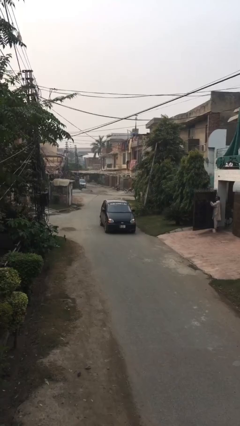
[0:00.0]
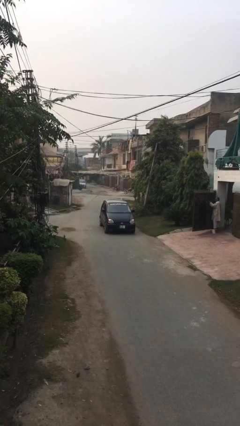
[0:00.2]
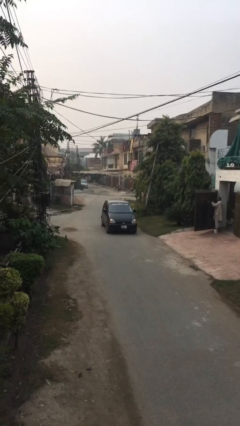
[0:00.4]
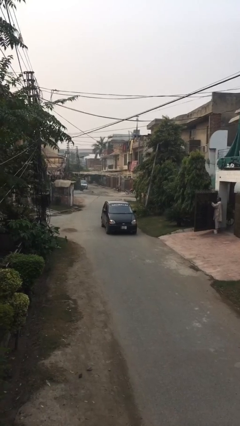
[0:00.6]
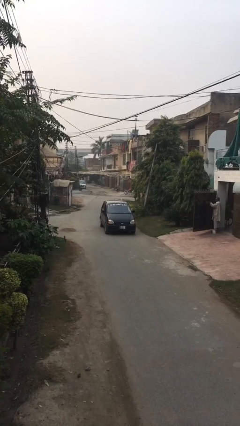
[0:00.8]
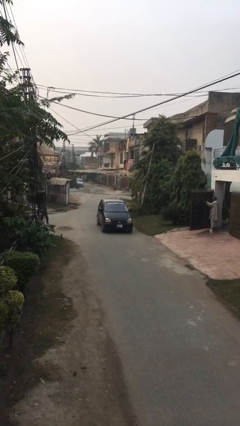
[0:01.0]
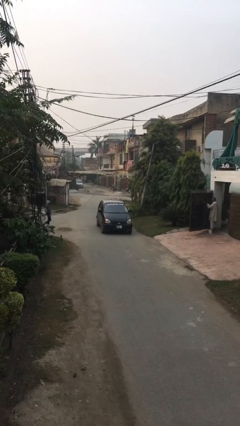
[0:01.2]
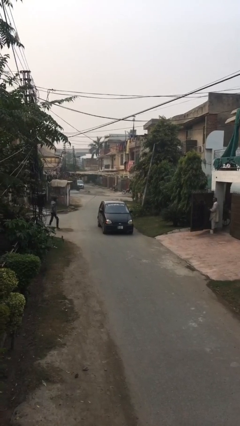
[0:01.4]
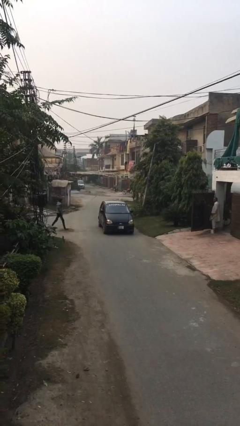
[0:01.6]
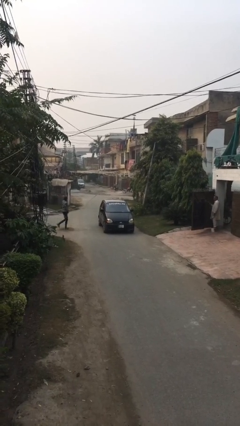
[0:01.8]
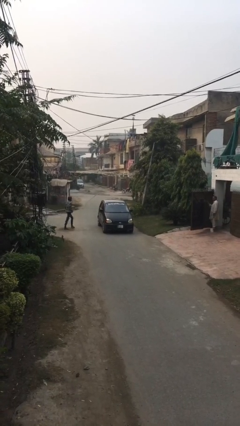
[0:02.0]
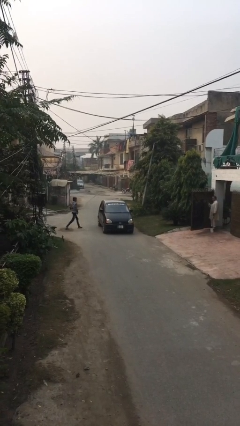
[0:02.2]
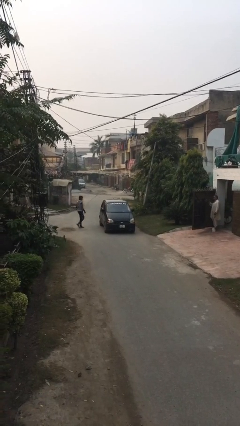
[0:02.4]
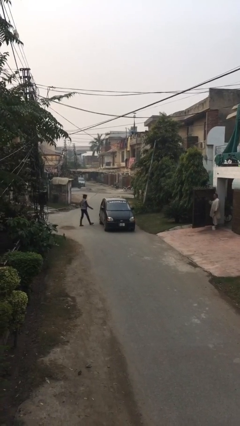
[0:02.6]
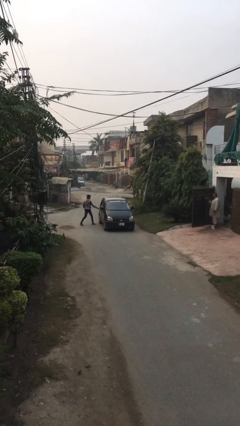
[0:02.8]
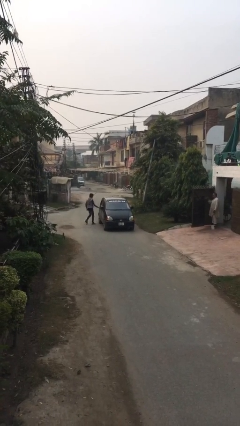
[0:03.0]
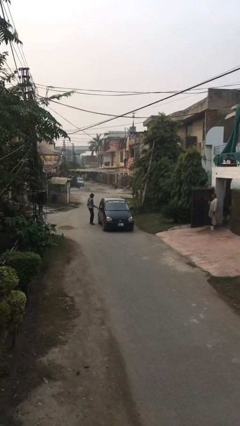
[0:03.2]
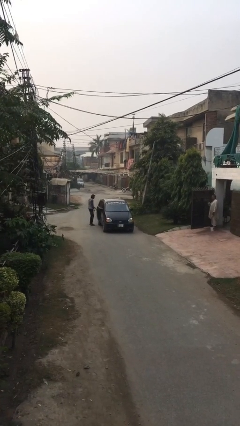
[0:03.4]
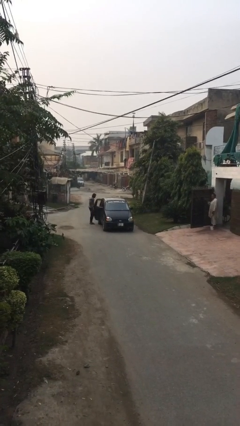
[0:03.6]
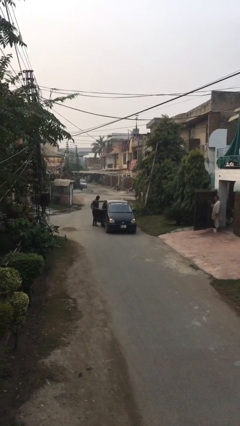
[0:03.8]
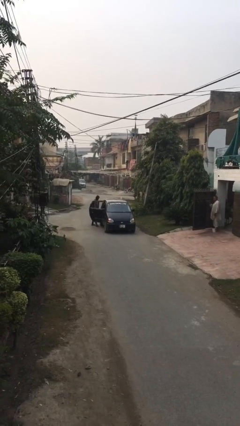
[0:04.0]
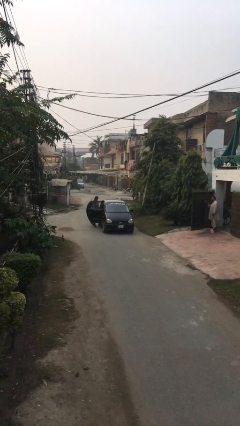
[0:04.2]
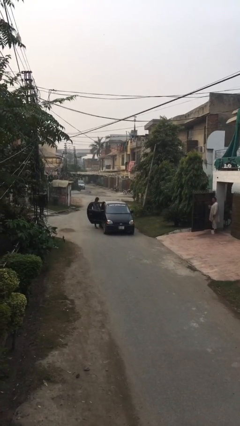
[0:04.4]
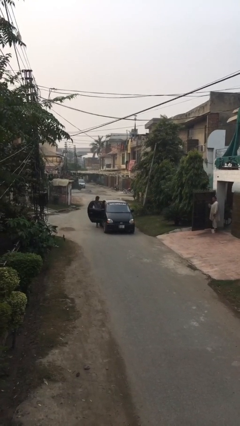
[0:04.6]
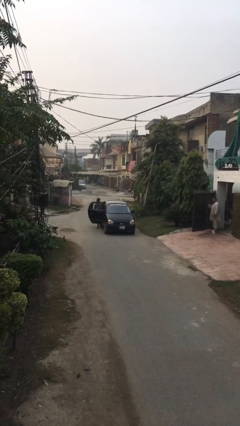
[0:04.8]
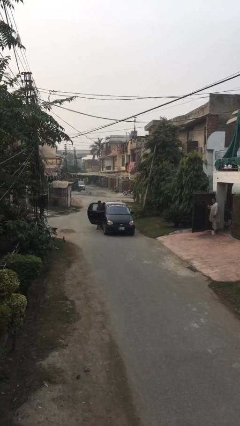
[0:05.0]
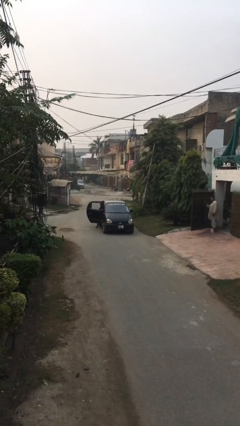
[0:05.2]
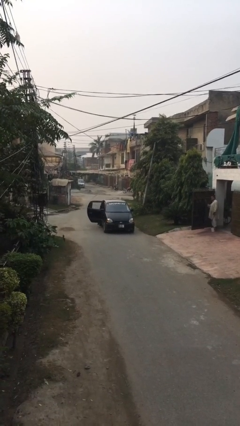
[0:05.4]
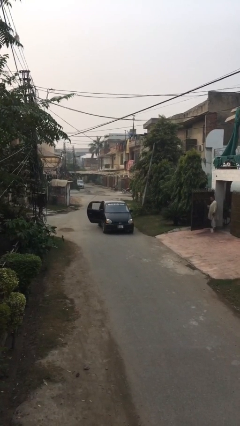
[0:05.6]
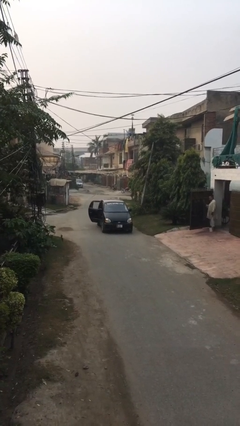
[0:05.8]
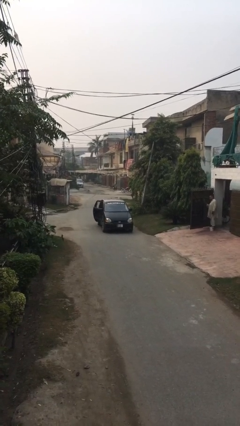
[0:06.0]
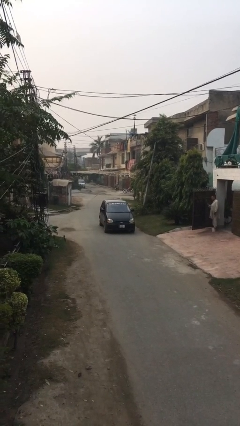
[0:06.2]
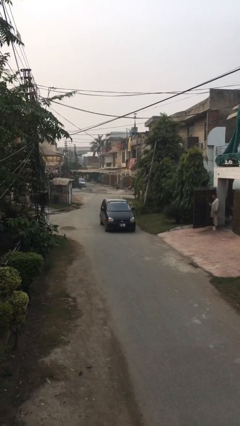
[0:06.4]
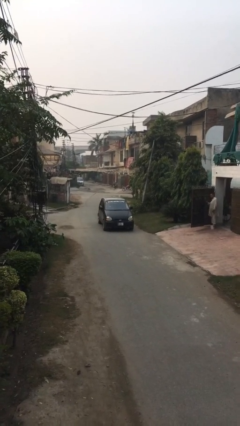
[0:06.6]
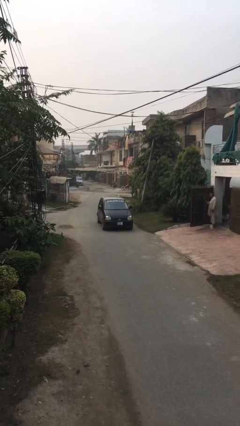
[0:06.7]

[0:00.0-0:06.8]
car picks up person

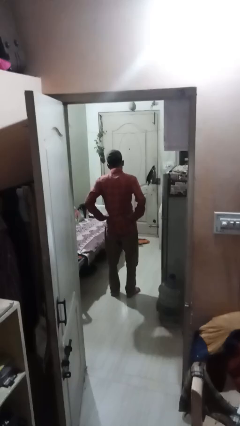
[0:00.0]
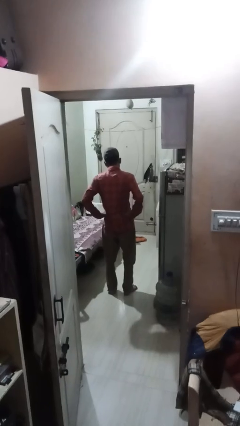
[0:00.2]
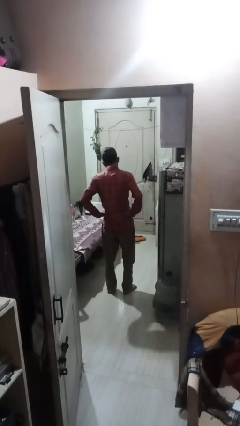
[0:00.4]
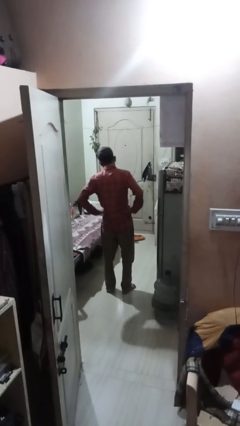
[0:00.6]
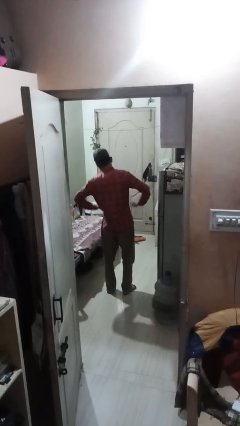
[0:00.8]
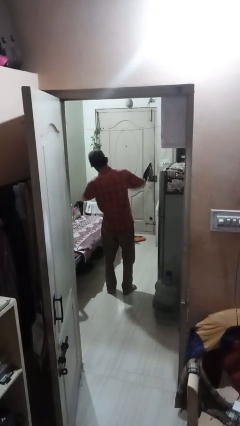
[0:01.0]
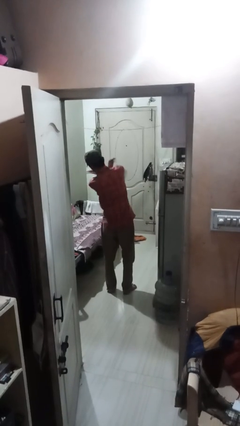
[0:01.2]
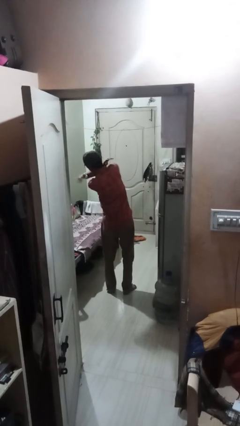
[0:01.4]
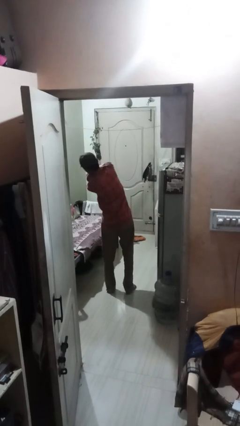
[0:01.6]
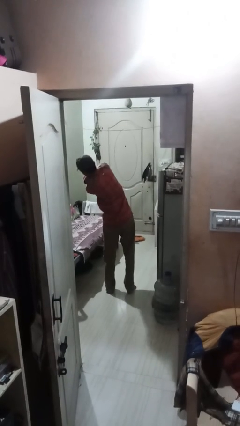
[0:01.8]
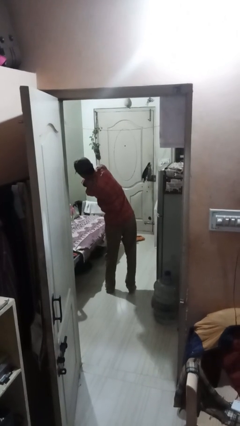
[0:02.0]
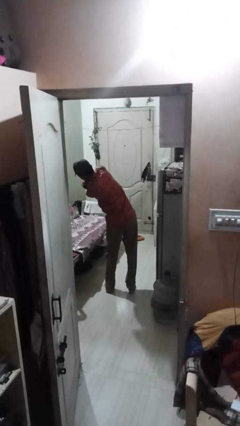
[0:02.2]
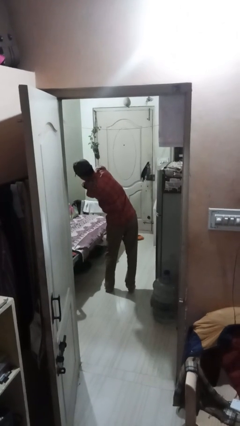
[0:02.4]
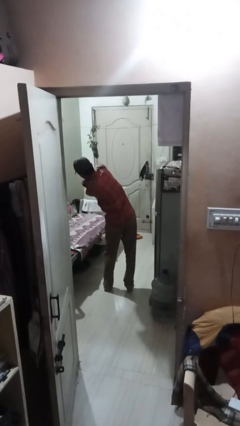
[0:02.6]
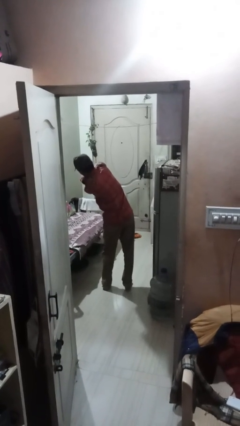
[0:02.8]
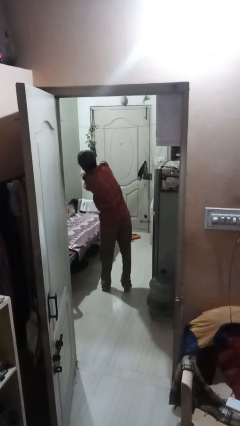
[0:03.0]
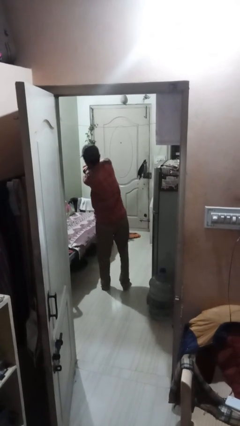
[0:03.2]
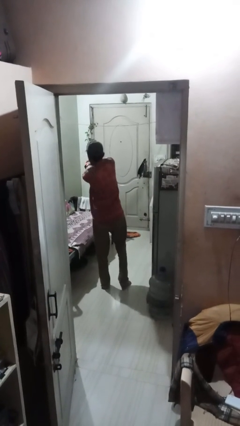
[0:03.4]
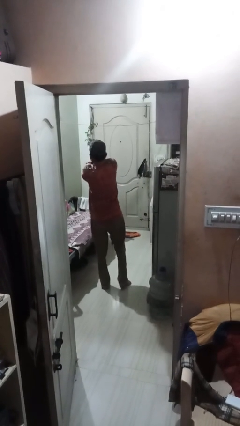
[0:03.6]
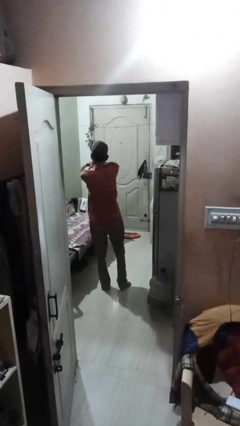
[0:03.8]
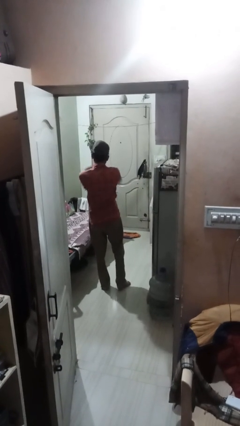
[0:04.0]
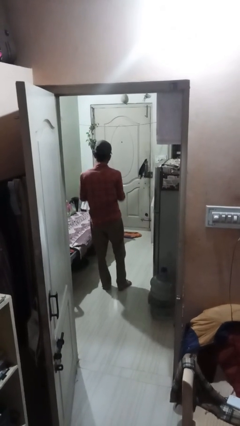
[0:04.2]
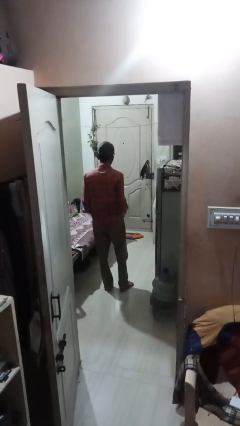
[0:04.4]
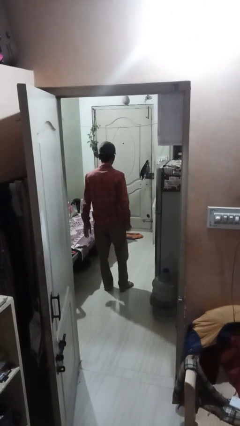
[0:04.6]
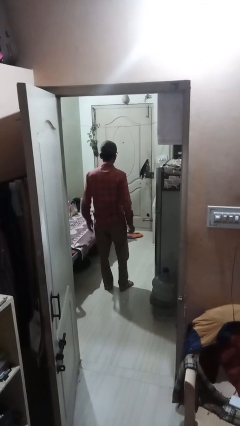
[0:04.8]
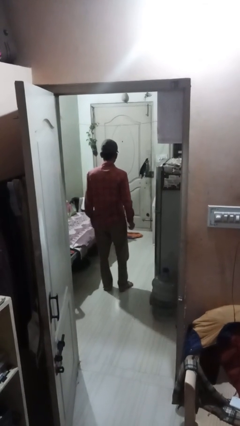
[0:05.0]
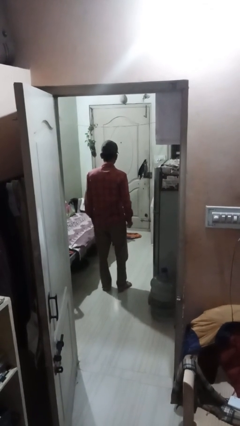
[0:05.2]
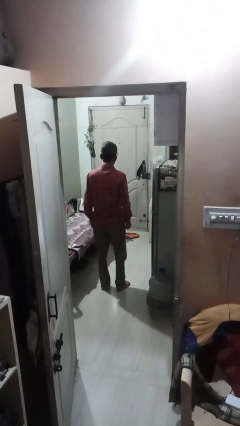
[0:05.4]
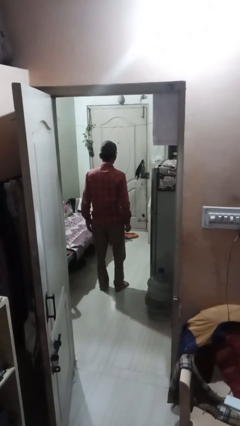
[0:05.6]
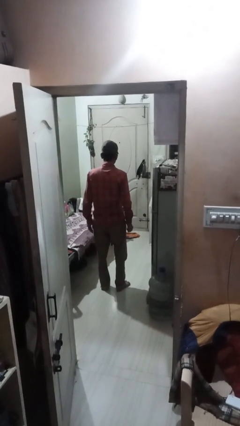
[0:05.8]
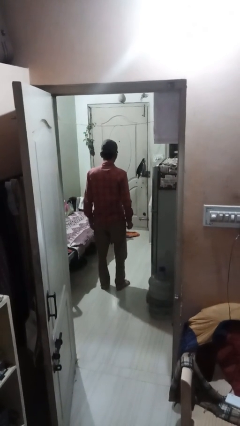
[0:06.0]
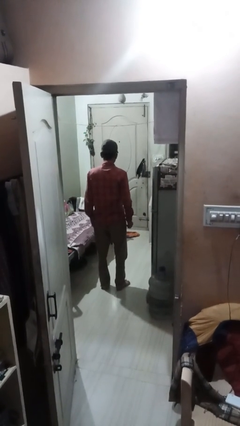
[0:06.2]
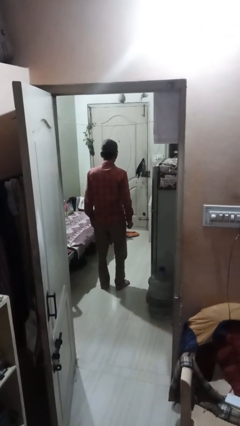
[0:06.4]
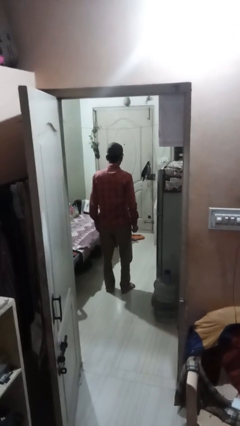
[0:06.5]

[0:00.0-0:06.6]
person stretches arms to side

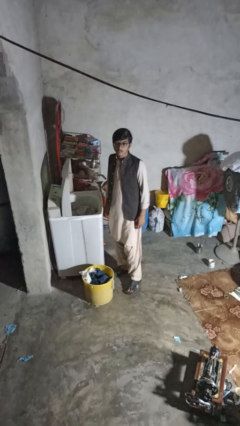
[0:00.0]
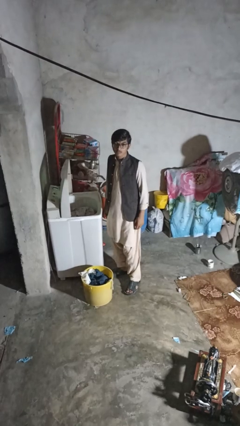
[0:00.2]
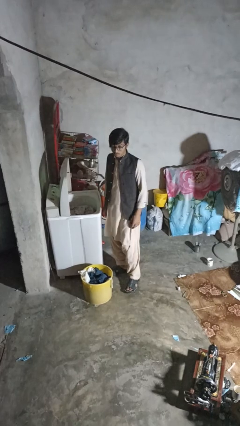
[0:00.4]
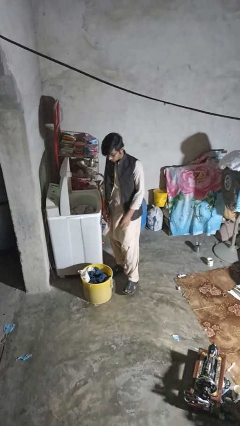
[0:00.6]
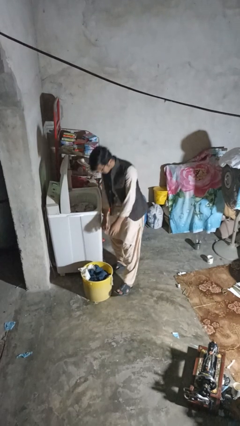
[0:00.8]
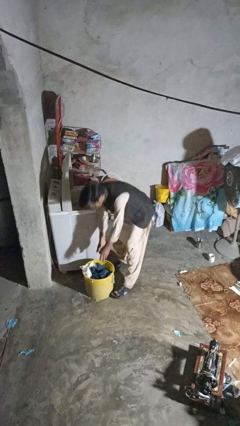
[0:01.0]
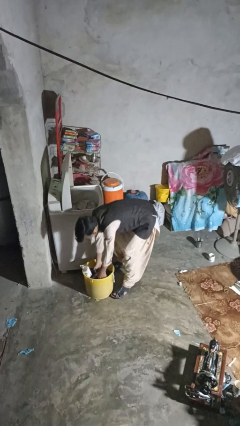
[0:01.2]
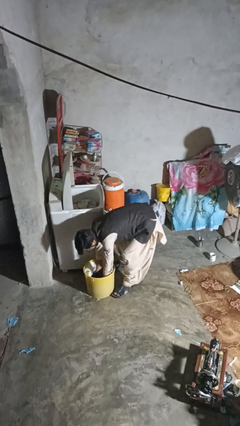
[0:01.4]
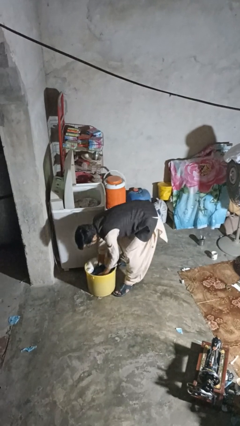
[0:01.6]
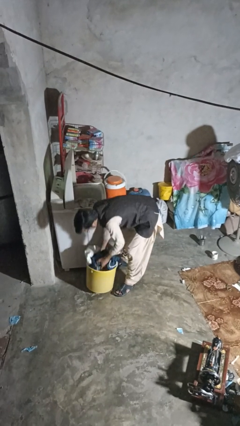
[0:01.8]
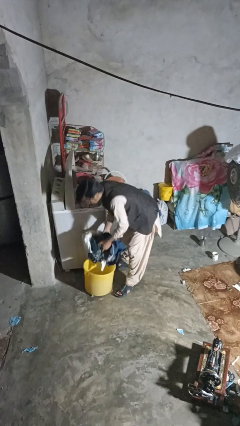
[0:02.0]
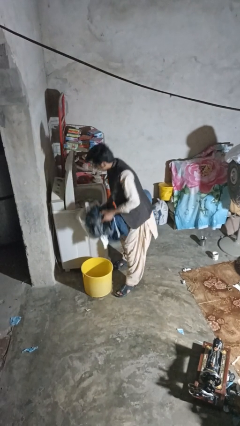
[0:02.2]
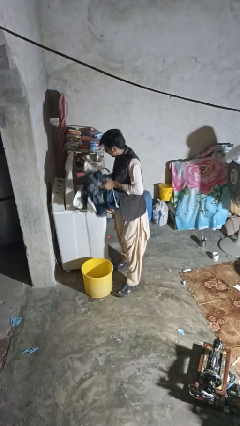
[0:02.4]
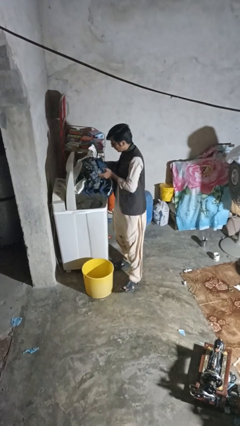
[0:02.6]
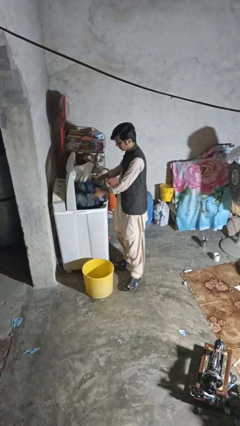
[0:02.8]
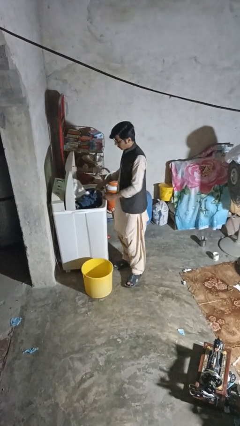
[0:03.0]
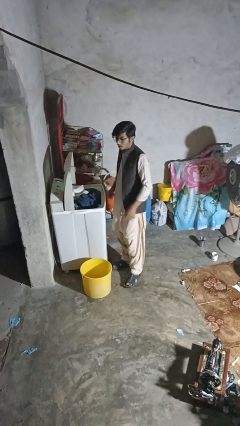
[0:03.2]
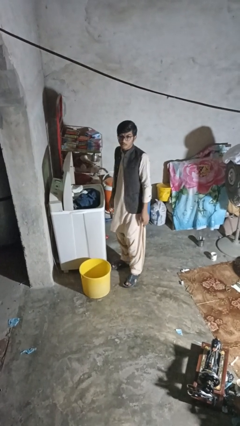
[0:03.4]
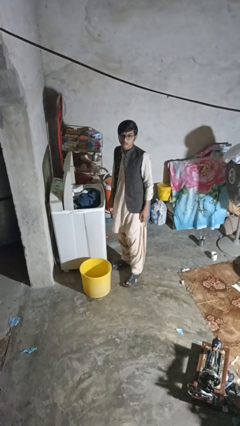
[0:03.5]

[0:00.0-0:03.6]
person loads dryer

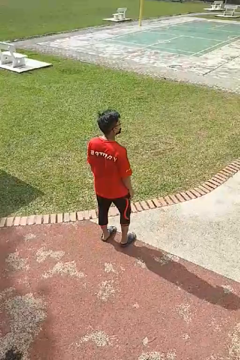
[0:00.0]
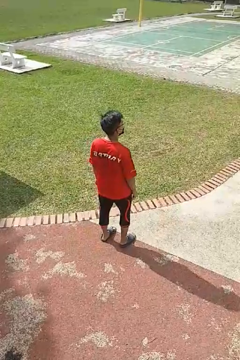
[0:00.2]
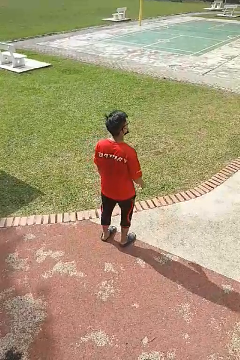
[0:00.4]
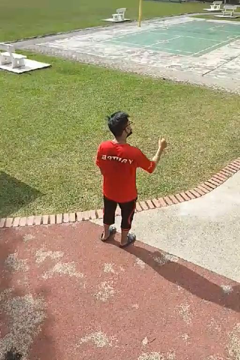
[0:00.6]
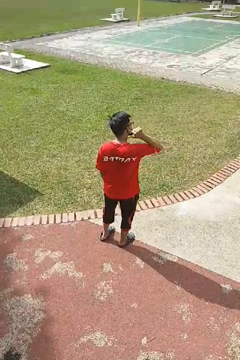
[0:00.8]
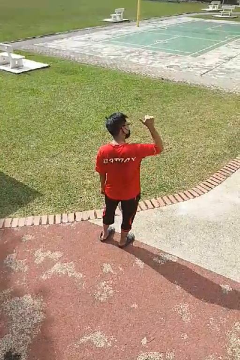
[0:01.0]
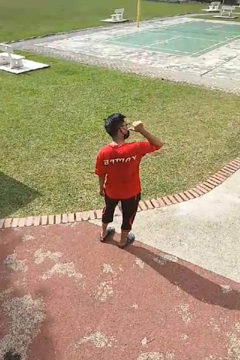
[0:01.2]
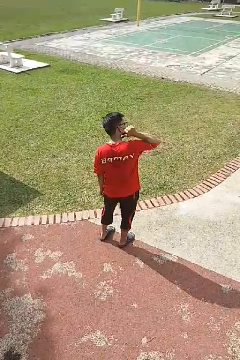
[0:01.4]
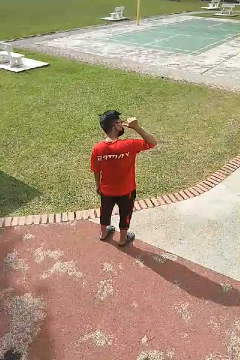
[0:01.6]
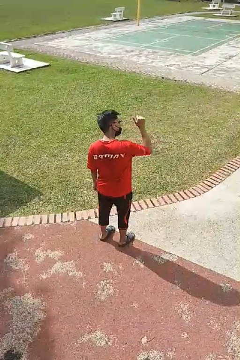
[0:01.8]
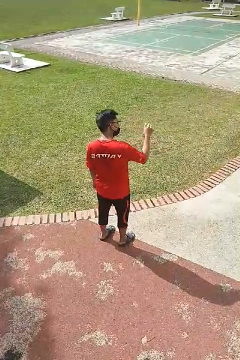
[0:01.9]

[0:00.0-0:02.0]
person gestures behind me
